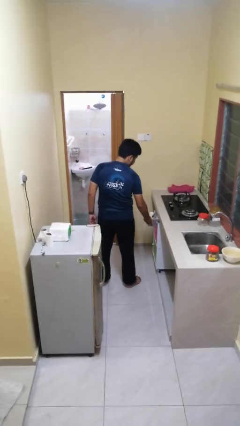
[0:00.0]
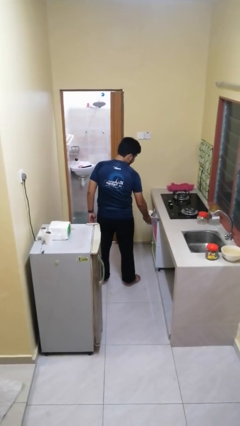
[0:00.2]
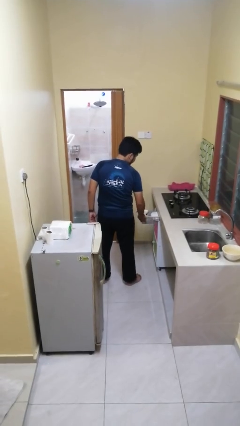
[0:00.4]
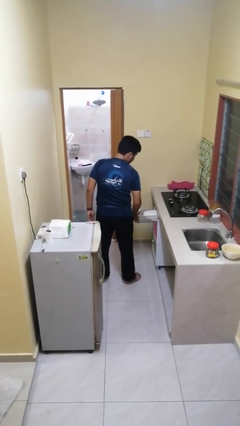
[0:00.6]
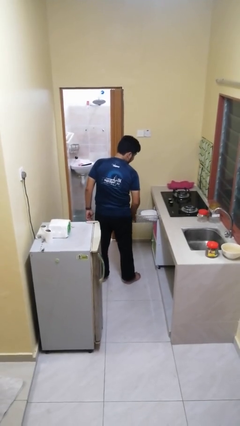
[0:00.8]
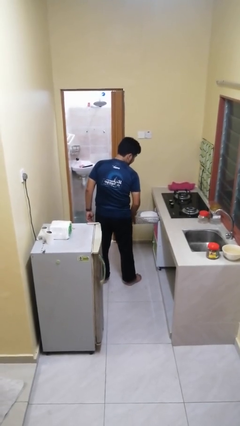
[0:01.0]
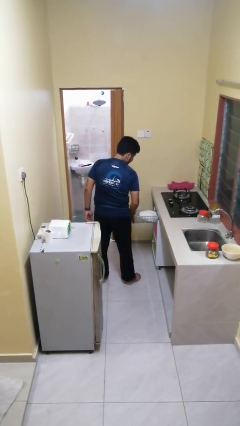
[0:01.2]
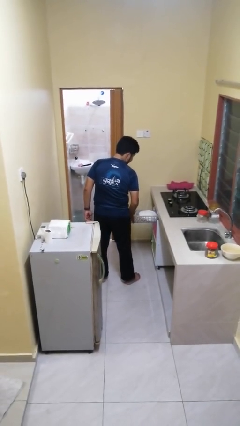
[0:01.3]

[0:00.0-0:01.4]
person opens kitchen drawer

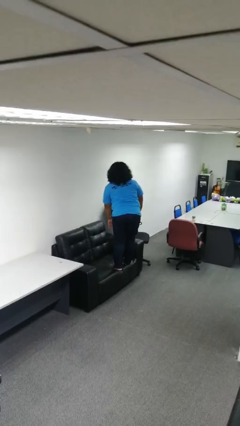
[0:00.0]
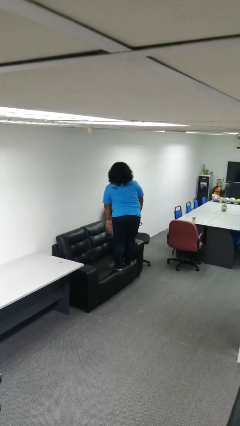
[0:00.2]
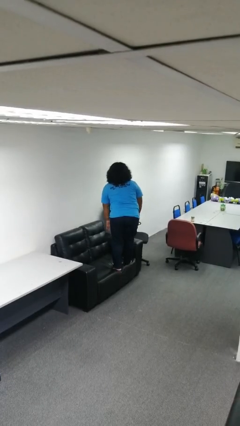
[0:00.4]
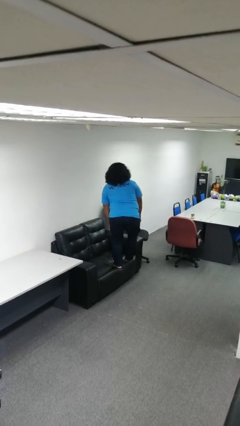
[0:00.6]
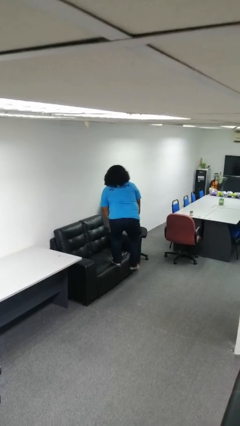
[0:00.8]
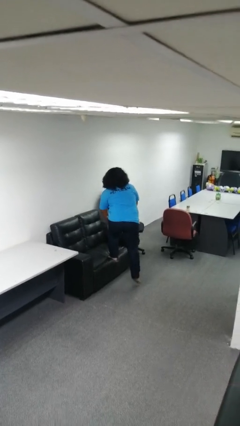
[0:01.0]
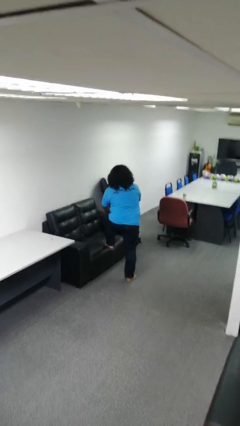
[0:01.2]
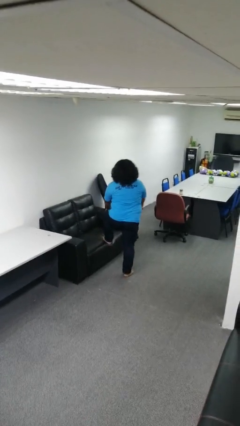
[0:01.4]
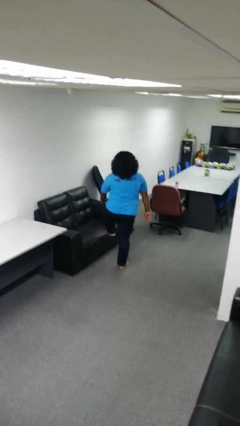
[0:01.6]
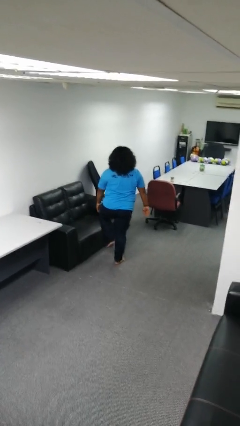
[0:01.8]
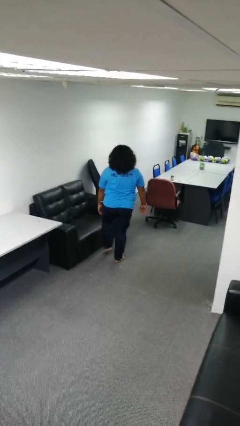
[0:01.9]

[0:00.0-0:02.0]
person climbs off couch

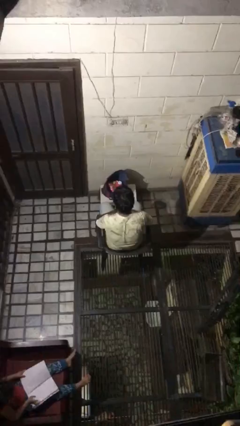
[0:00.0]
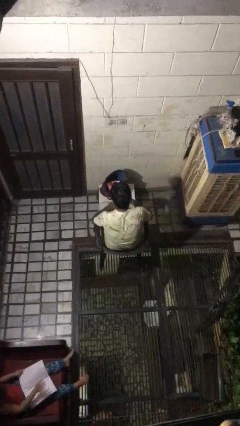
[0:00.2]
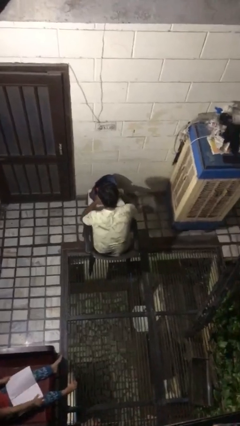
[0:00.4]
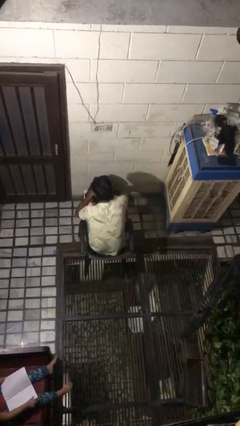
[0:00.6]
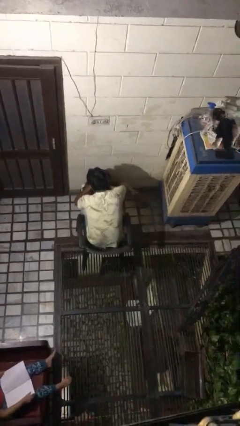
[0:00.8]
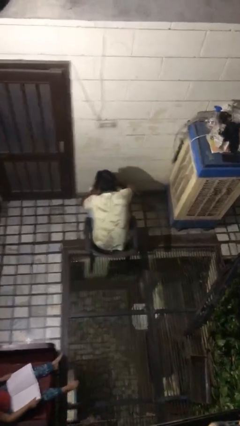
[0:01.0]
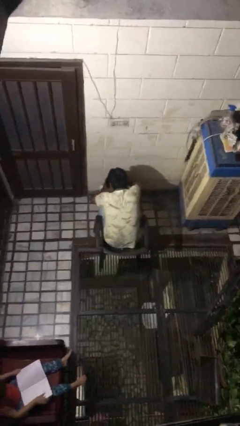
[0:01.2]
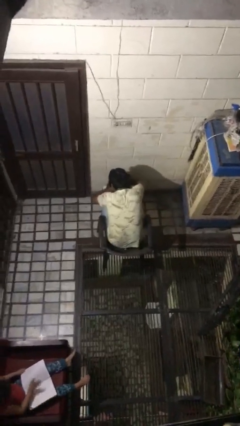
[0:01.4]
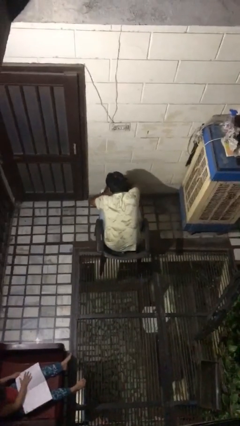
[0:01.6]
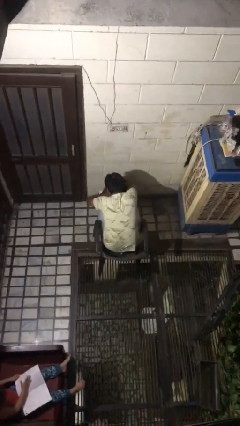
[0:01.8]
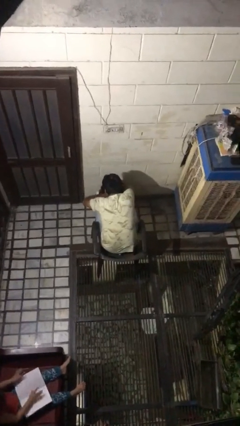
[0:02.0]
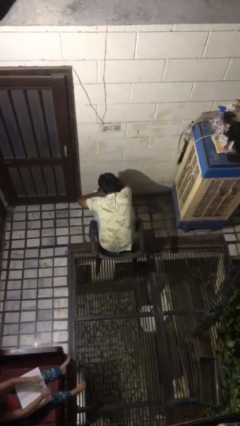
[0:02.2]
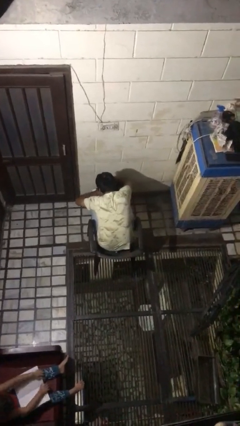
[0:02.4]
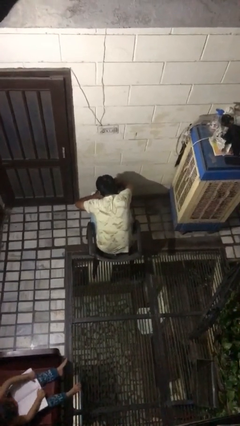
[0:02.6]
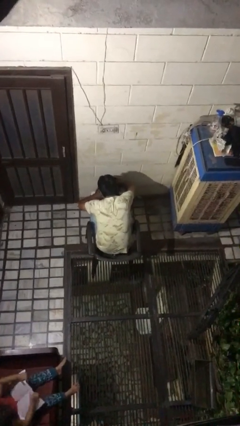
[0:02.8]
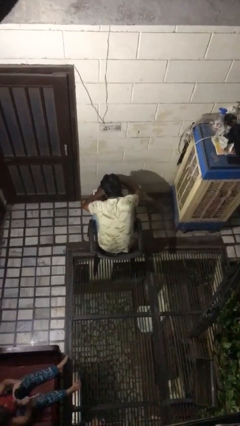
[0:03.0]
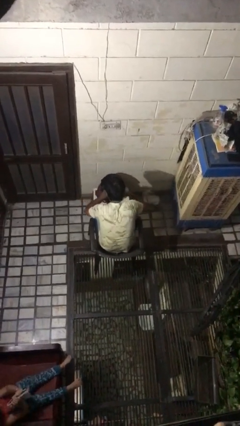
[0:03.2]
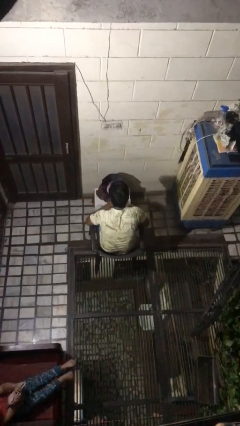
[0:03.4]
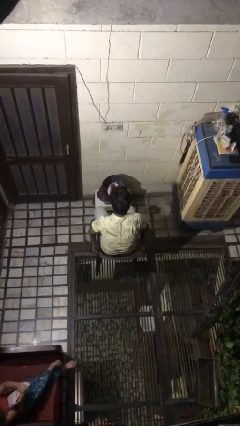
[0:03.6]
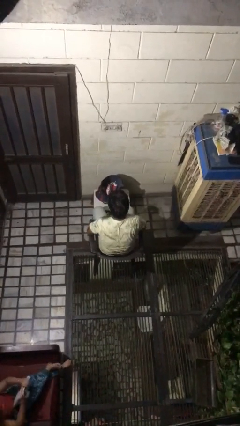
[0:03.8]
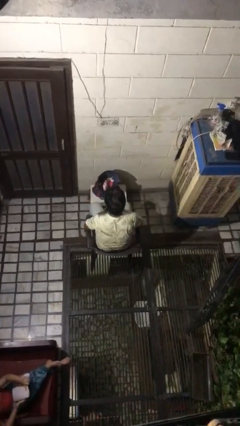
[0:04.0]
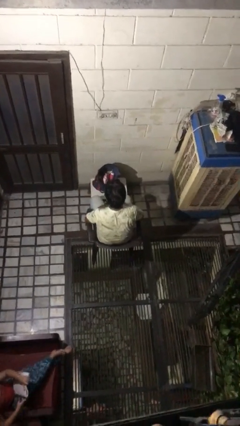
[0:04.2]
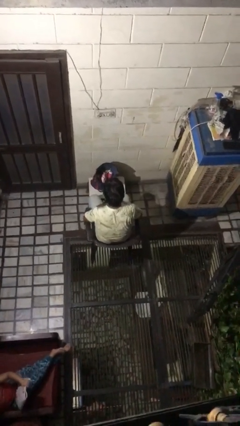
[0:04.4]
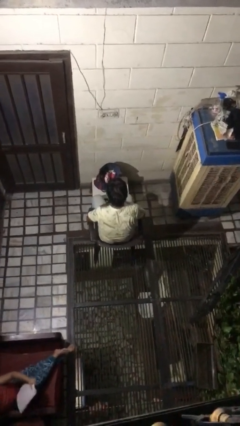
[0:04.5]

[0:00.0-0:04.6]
person searches in bag

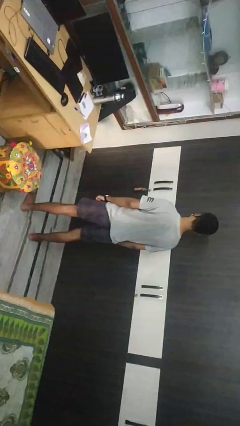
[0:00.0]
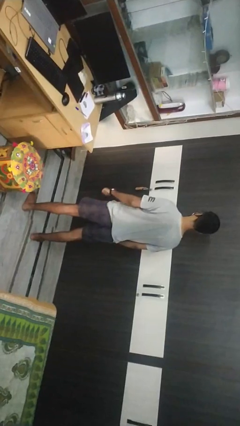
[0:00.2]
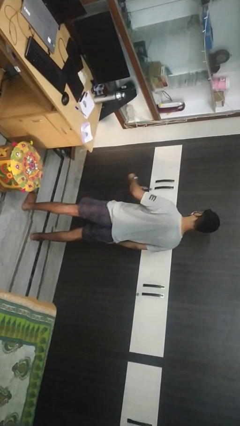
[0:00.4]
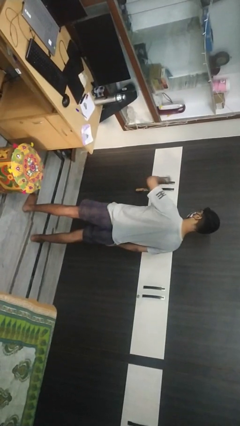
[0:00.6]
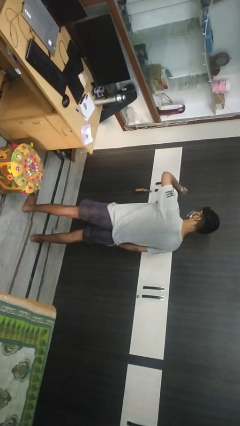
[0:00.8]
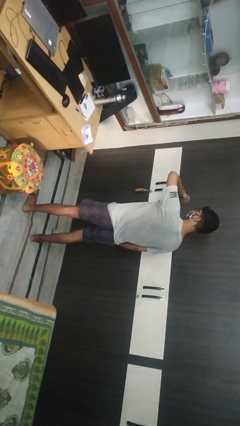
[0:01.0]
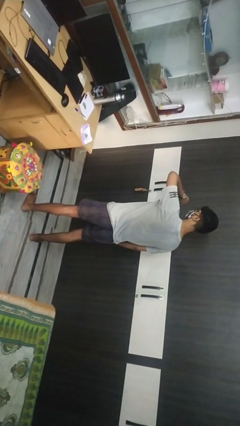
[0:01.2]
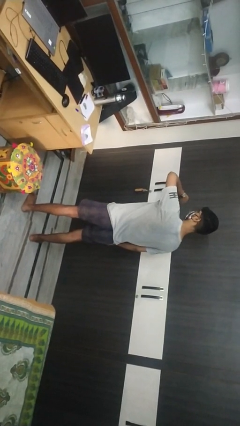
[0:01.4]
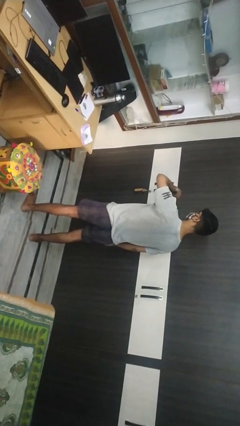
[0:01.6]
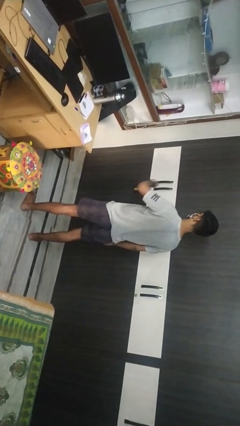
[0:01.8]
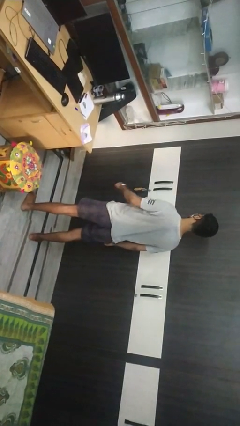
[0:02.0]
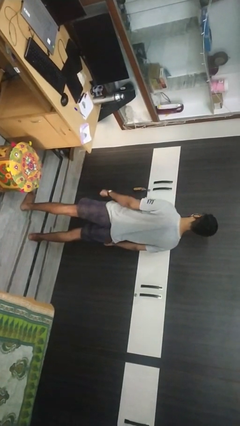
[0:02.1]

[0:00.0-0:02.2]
person looks at wristwatch

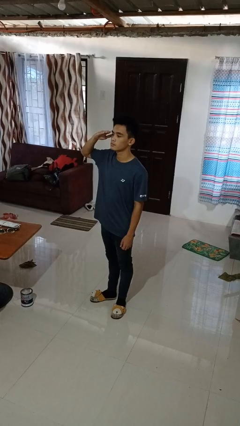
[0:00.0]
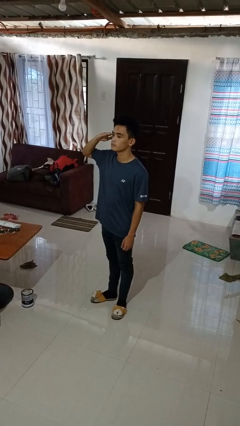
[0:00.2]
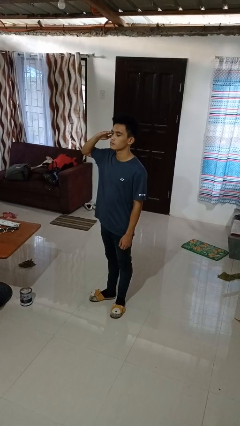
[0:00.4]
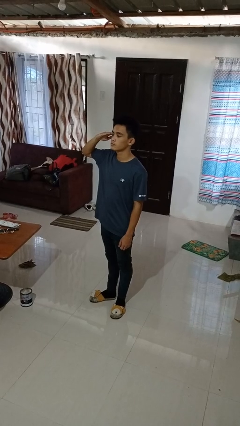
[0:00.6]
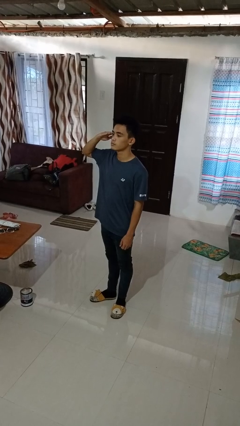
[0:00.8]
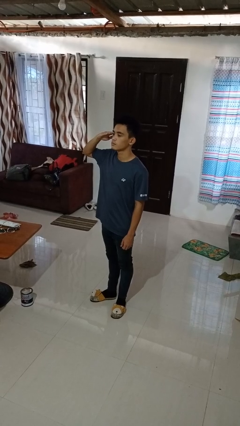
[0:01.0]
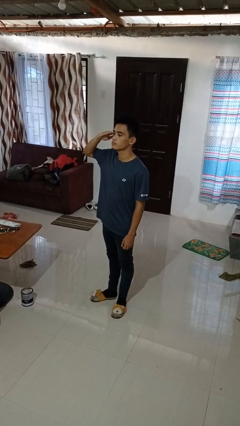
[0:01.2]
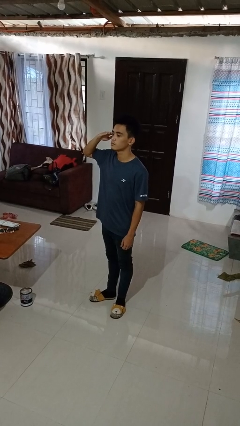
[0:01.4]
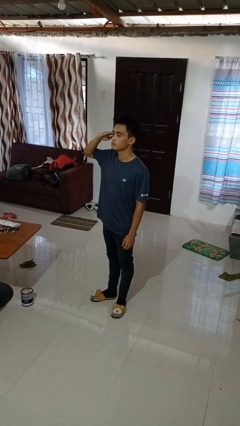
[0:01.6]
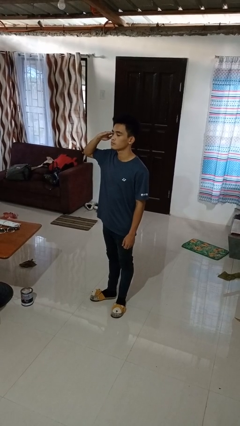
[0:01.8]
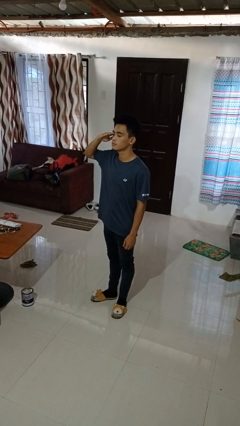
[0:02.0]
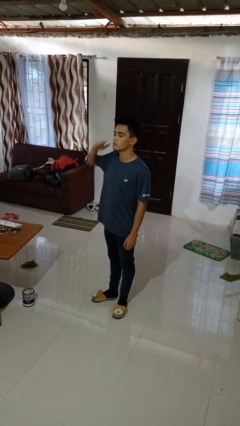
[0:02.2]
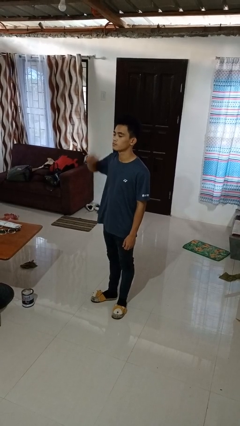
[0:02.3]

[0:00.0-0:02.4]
person salutes

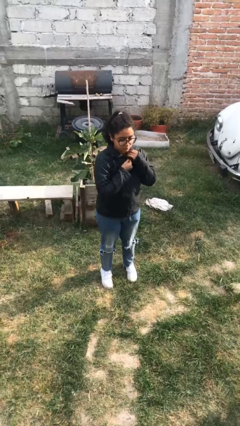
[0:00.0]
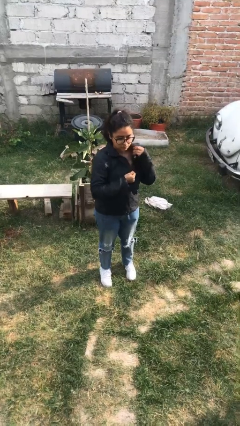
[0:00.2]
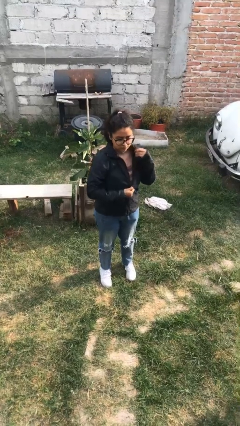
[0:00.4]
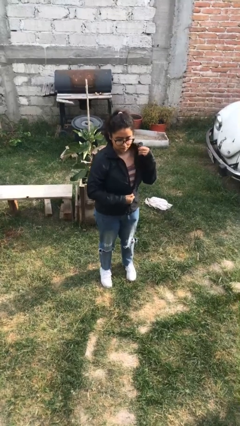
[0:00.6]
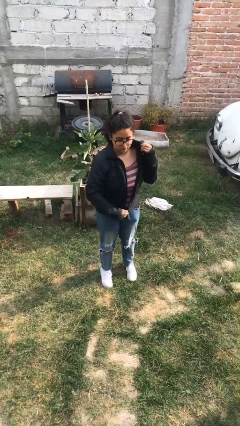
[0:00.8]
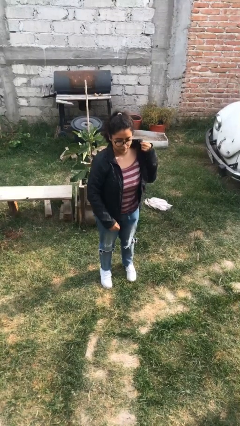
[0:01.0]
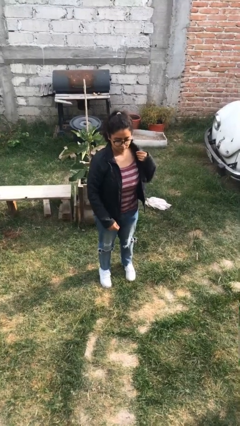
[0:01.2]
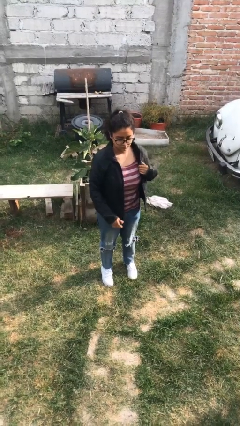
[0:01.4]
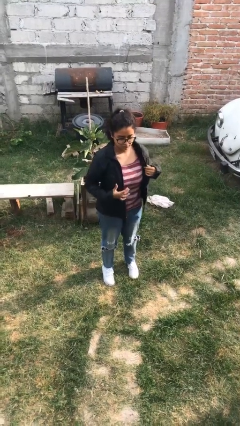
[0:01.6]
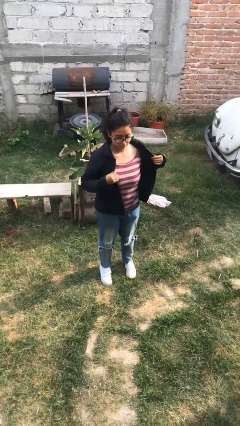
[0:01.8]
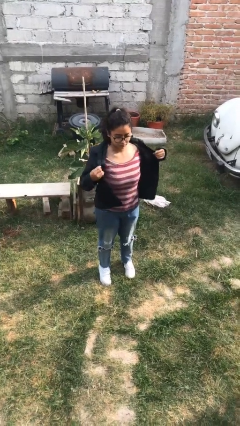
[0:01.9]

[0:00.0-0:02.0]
person unzips jacket

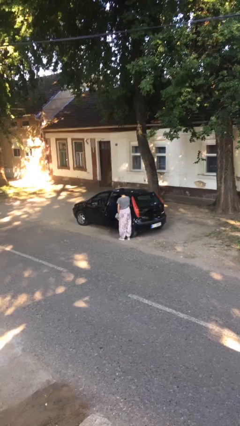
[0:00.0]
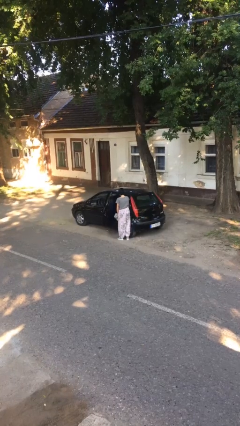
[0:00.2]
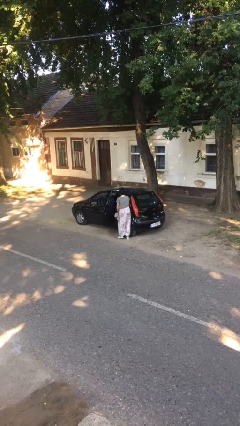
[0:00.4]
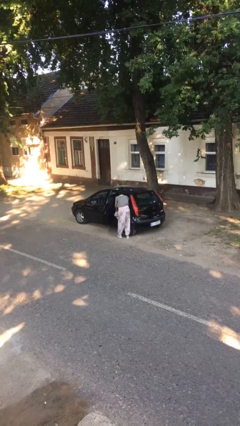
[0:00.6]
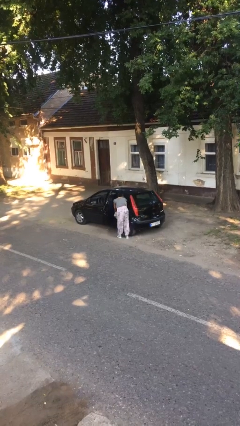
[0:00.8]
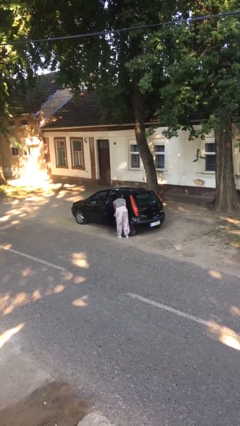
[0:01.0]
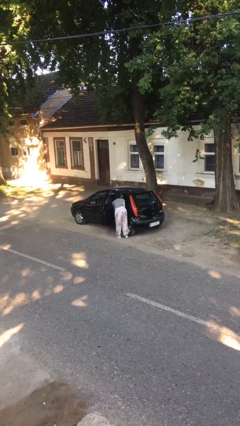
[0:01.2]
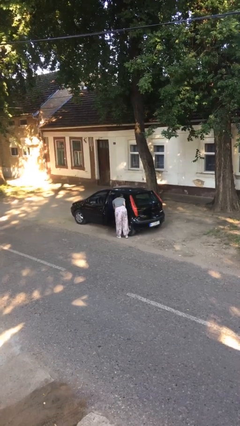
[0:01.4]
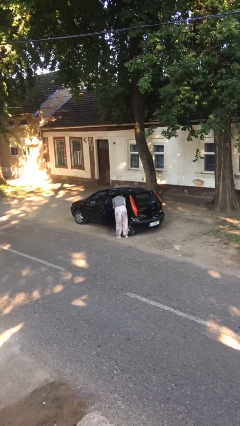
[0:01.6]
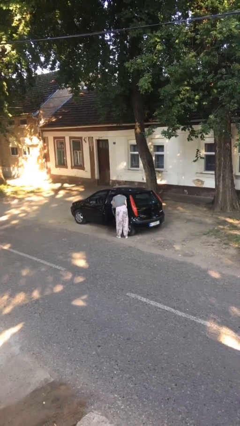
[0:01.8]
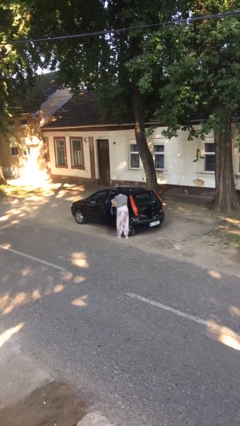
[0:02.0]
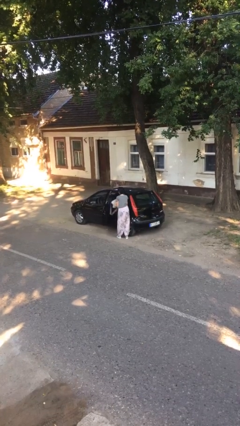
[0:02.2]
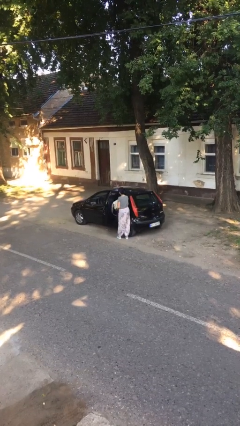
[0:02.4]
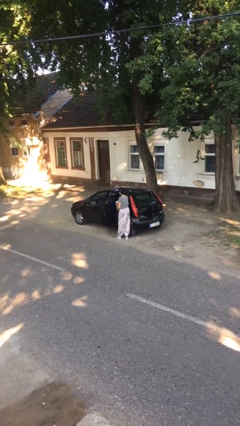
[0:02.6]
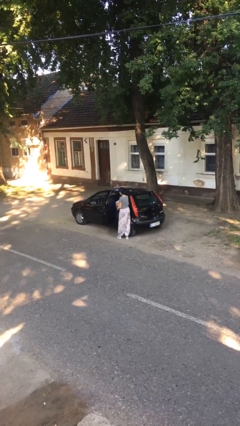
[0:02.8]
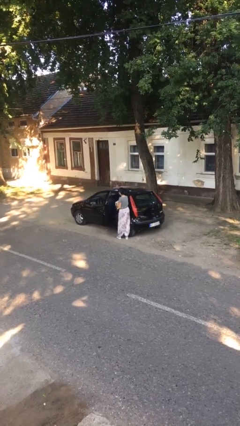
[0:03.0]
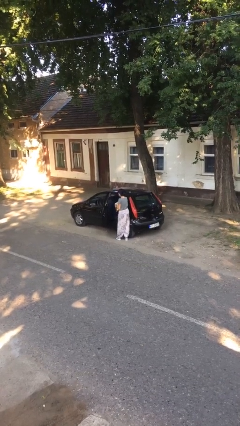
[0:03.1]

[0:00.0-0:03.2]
person unloads car
